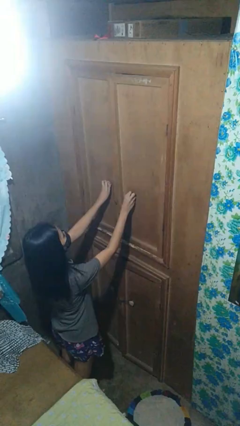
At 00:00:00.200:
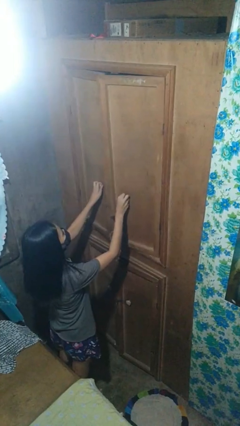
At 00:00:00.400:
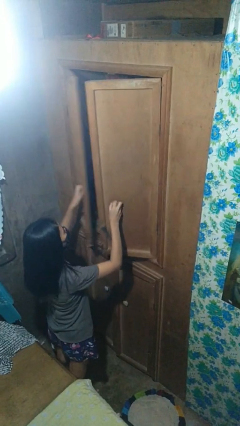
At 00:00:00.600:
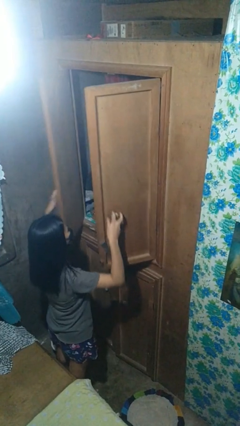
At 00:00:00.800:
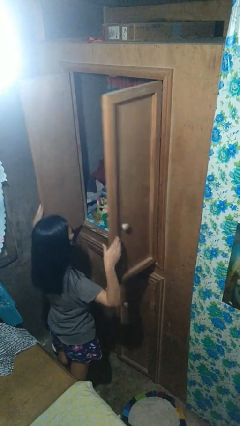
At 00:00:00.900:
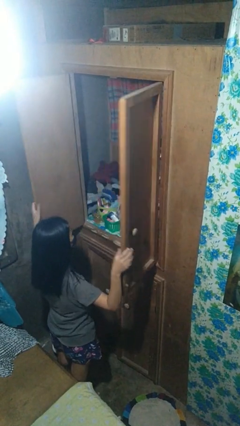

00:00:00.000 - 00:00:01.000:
person opens closet door

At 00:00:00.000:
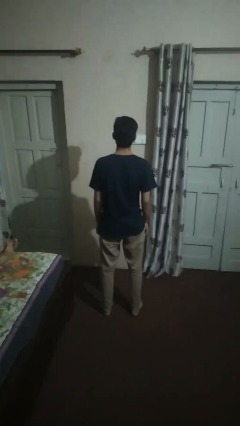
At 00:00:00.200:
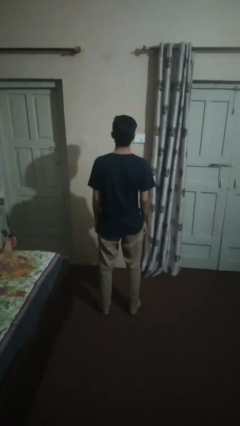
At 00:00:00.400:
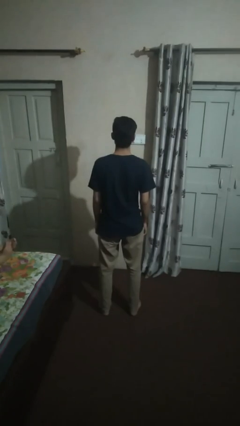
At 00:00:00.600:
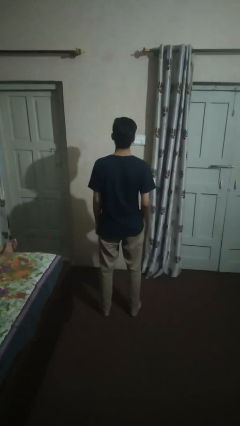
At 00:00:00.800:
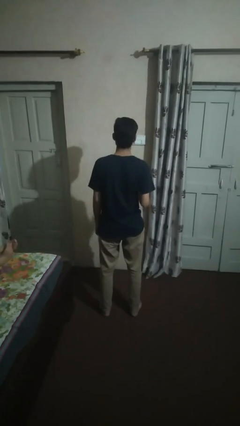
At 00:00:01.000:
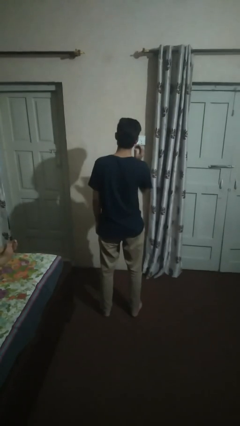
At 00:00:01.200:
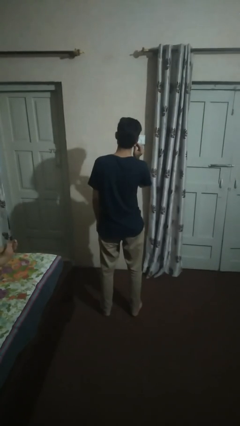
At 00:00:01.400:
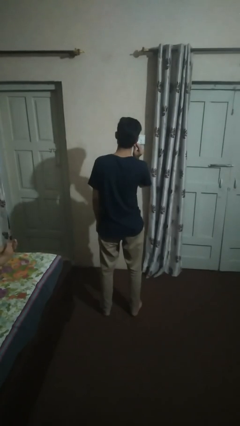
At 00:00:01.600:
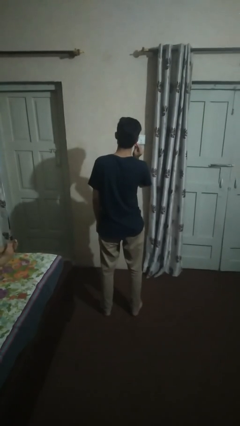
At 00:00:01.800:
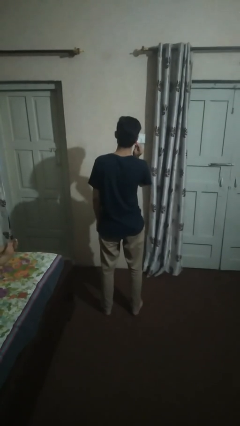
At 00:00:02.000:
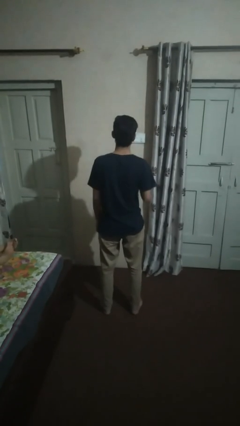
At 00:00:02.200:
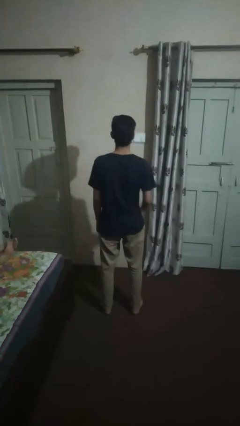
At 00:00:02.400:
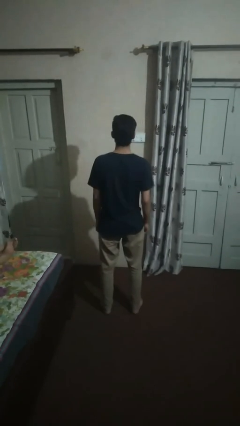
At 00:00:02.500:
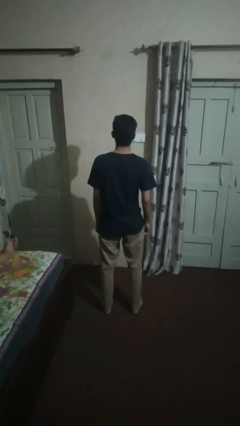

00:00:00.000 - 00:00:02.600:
person takes off earrings

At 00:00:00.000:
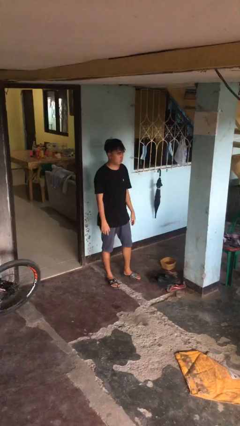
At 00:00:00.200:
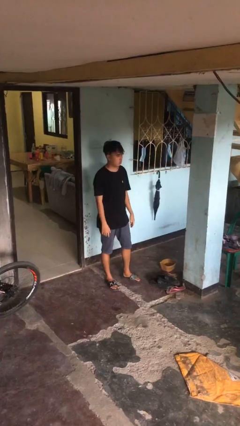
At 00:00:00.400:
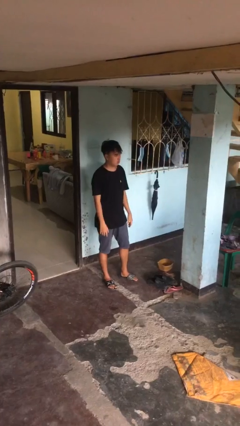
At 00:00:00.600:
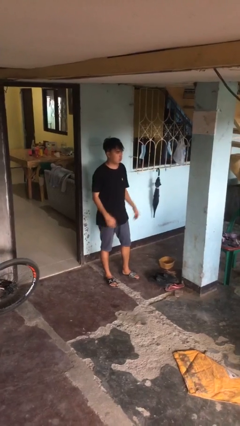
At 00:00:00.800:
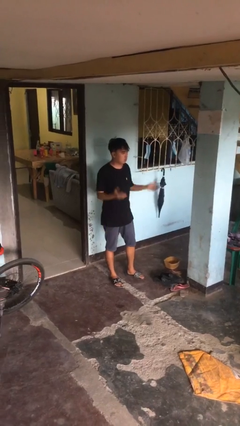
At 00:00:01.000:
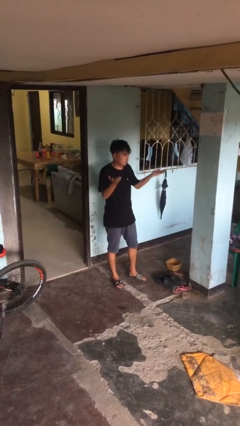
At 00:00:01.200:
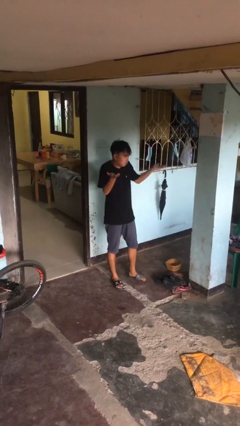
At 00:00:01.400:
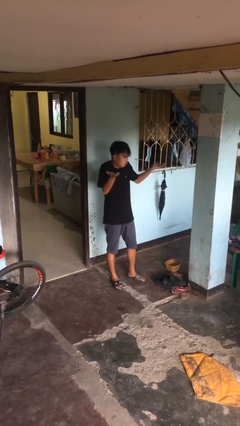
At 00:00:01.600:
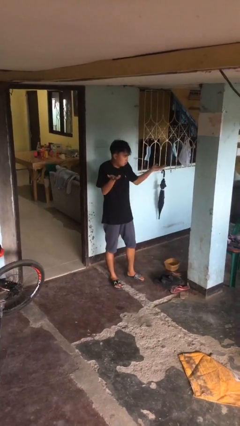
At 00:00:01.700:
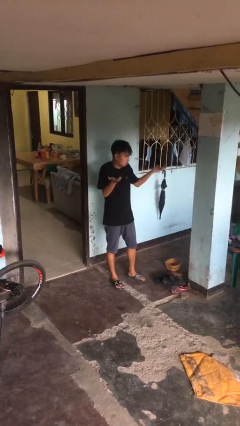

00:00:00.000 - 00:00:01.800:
person shrugs

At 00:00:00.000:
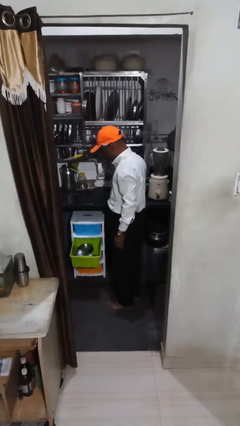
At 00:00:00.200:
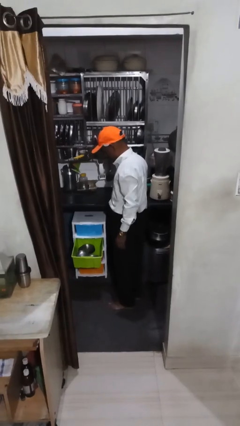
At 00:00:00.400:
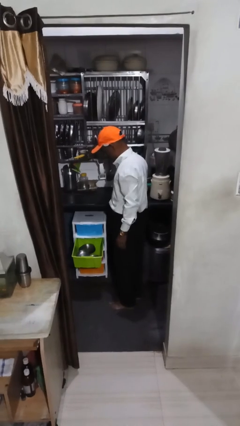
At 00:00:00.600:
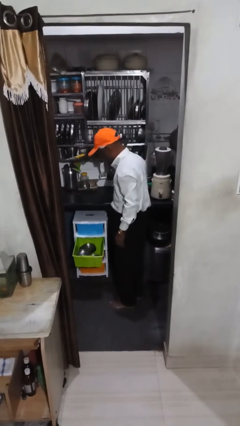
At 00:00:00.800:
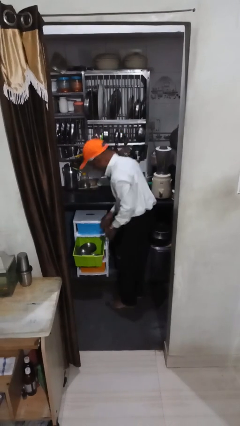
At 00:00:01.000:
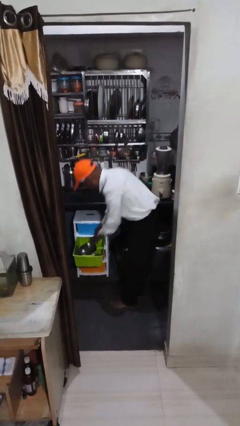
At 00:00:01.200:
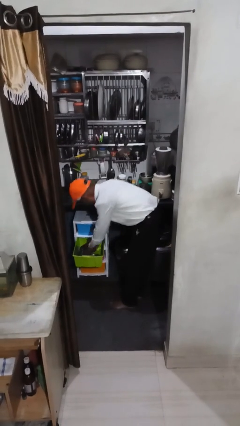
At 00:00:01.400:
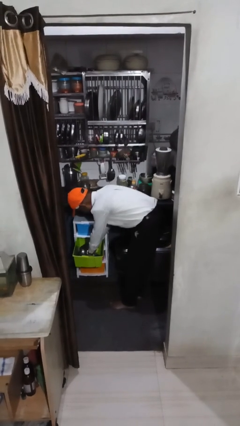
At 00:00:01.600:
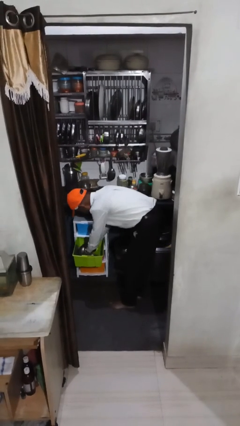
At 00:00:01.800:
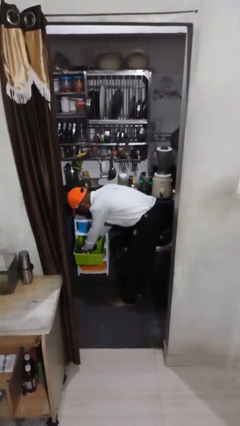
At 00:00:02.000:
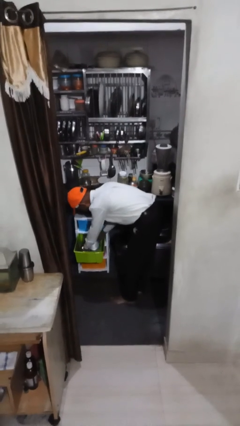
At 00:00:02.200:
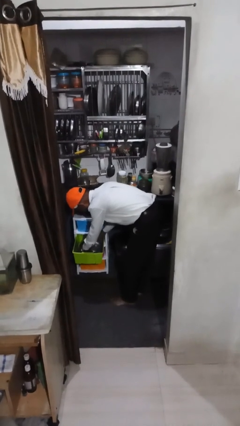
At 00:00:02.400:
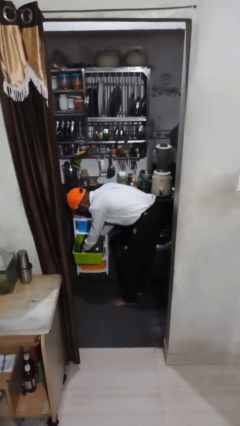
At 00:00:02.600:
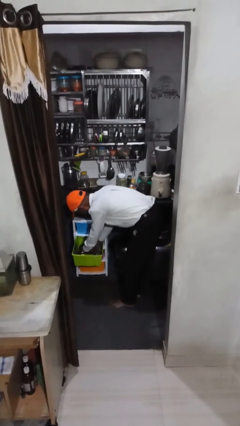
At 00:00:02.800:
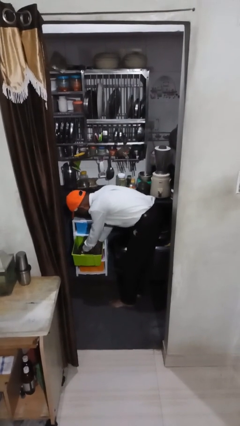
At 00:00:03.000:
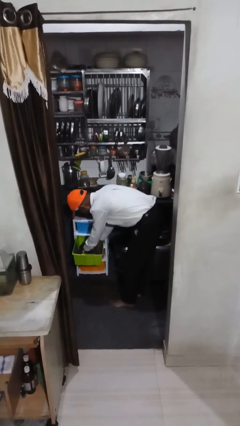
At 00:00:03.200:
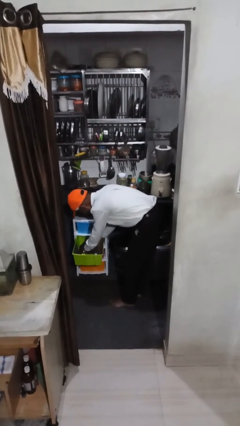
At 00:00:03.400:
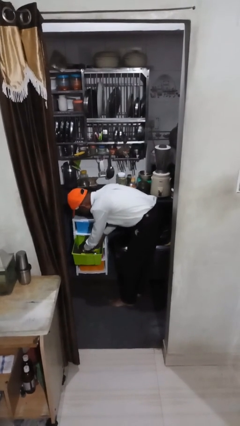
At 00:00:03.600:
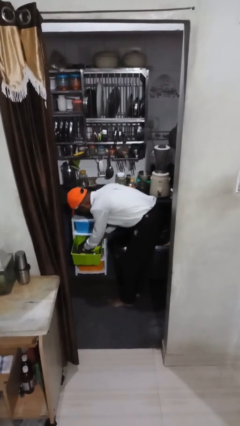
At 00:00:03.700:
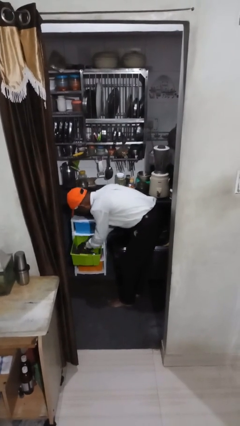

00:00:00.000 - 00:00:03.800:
person searches in kitchen drawer

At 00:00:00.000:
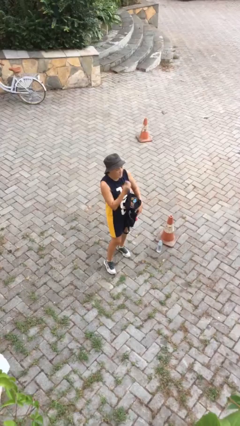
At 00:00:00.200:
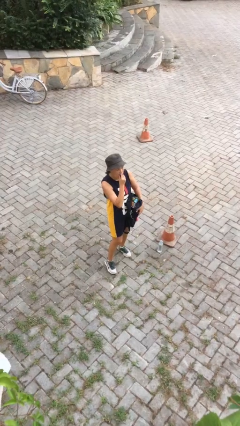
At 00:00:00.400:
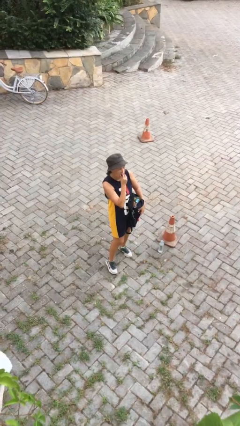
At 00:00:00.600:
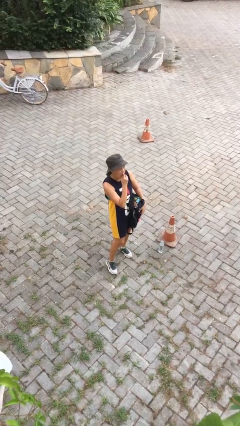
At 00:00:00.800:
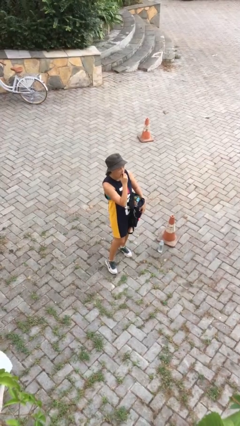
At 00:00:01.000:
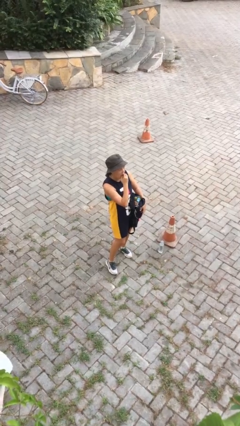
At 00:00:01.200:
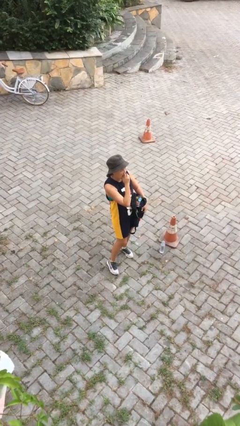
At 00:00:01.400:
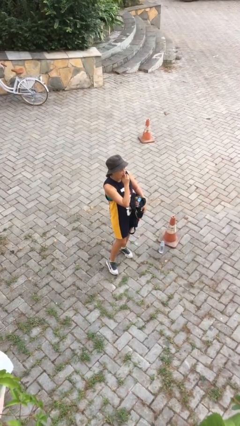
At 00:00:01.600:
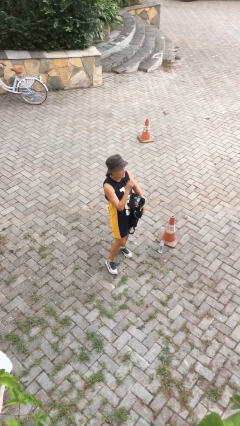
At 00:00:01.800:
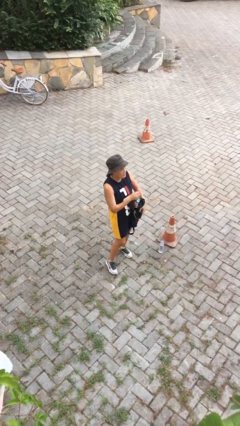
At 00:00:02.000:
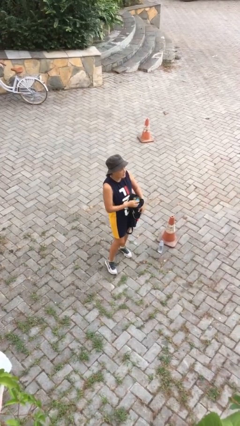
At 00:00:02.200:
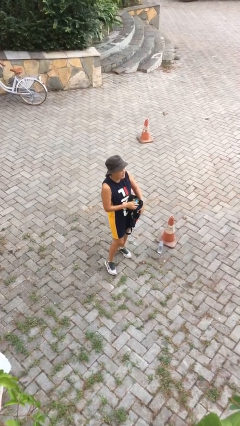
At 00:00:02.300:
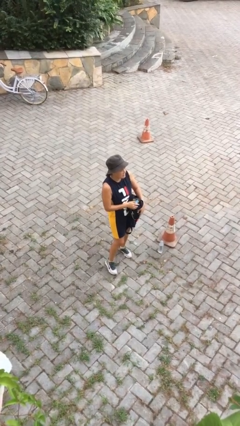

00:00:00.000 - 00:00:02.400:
person eats snack from bag

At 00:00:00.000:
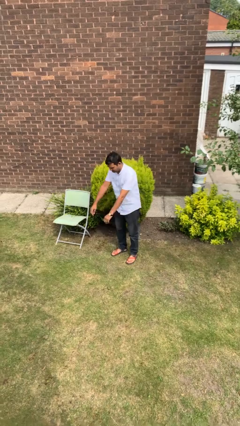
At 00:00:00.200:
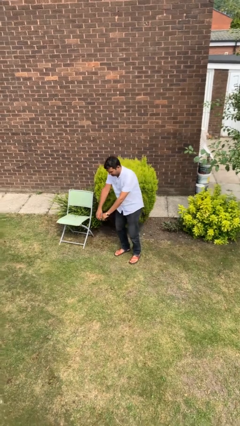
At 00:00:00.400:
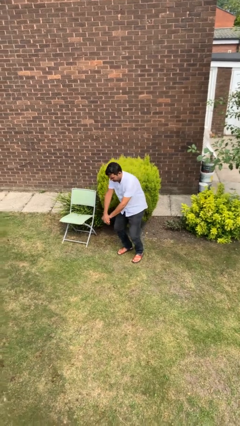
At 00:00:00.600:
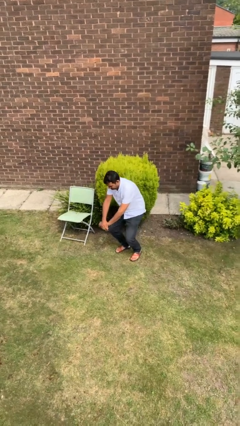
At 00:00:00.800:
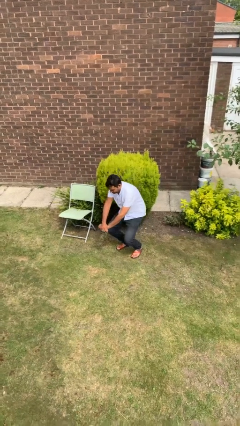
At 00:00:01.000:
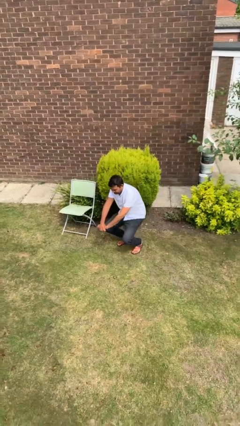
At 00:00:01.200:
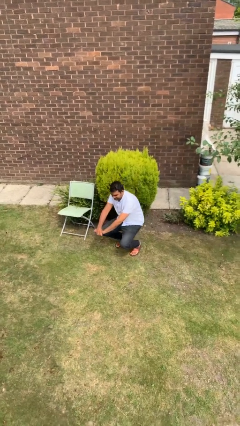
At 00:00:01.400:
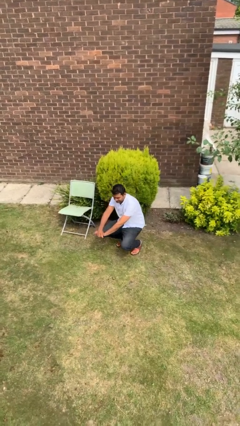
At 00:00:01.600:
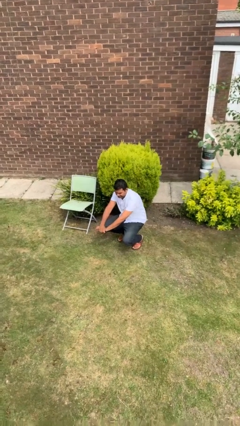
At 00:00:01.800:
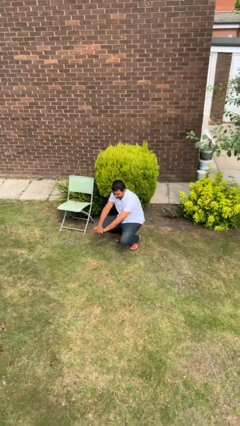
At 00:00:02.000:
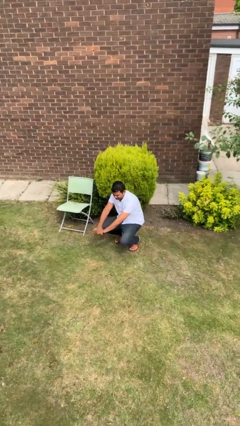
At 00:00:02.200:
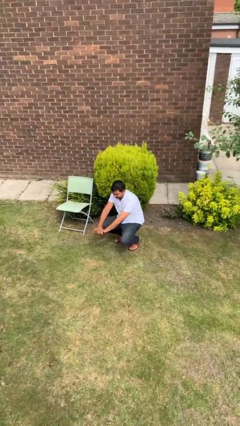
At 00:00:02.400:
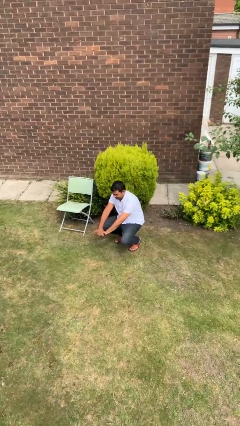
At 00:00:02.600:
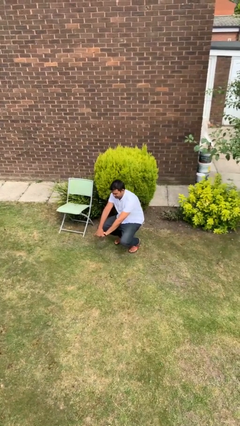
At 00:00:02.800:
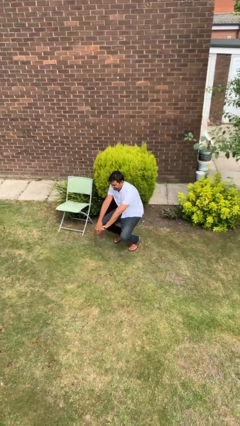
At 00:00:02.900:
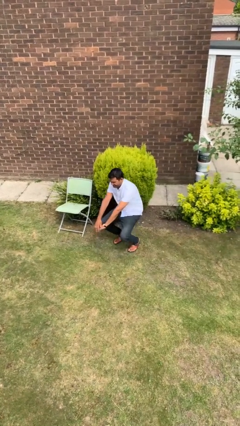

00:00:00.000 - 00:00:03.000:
person squats

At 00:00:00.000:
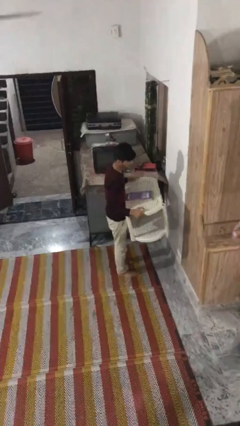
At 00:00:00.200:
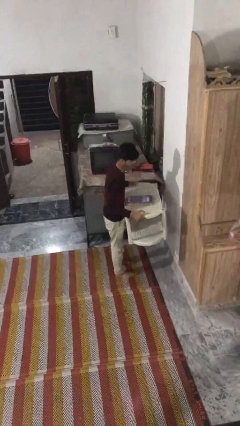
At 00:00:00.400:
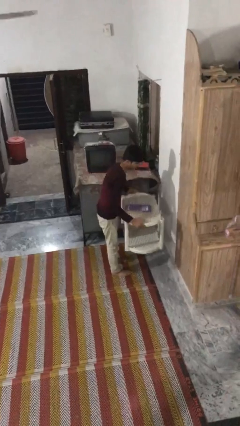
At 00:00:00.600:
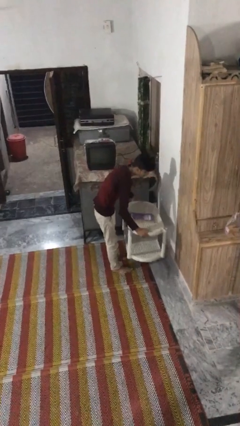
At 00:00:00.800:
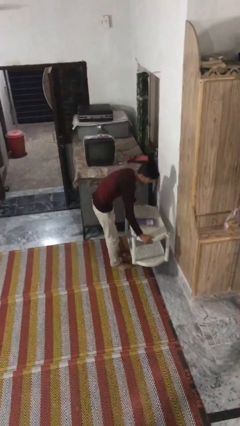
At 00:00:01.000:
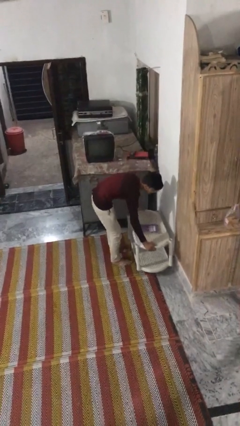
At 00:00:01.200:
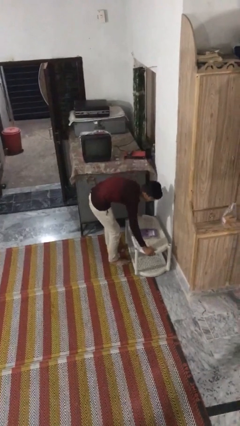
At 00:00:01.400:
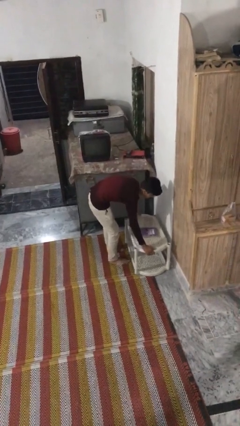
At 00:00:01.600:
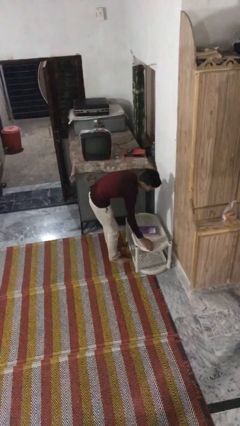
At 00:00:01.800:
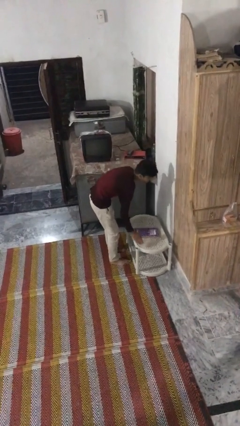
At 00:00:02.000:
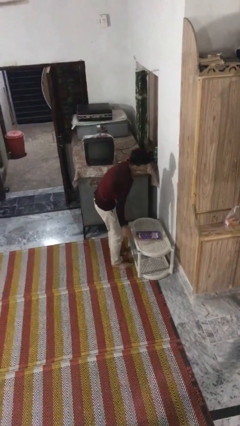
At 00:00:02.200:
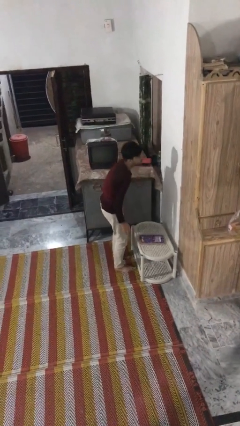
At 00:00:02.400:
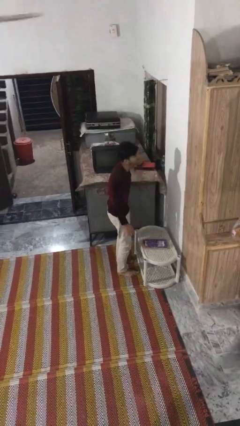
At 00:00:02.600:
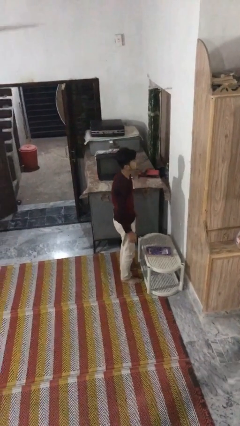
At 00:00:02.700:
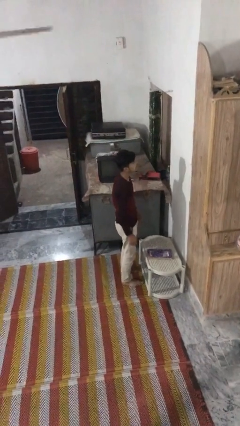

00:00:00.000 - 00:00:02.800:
person puts down object on floor
